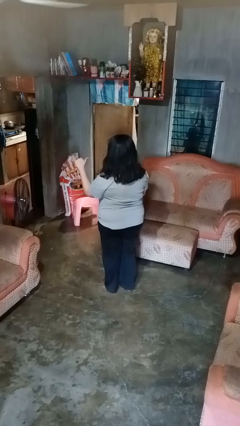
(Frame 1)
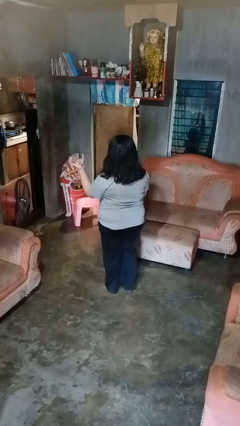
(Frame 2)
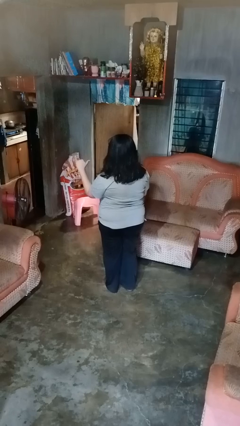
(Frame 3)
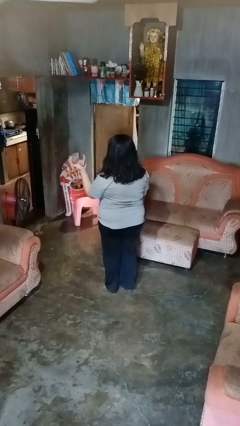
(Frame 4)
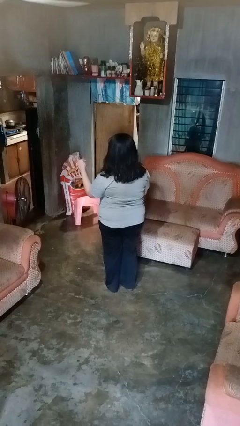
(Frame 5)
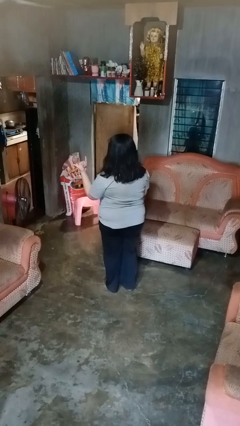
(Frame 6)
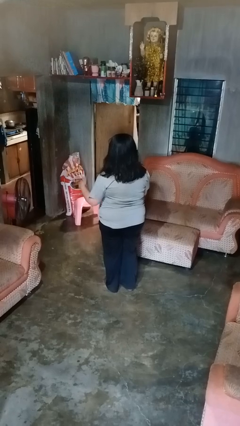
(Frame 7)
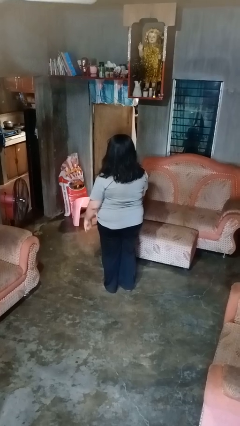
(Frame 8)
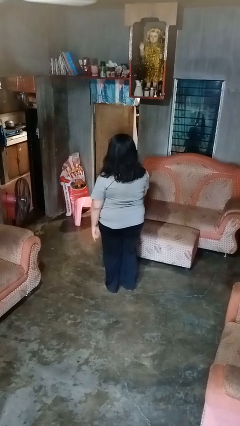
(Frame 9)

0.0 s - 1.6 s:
person gestures hang loose

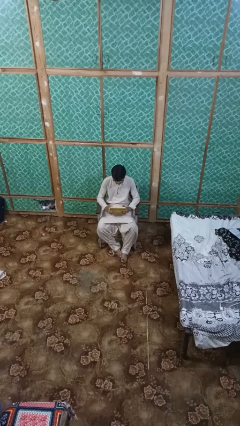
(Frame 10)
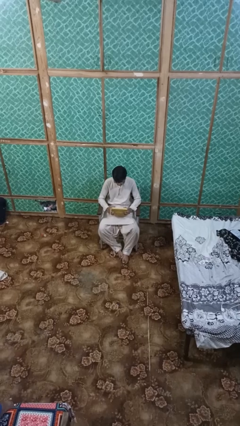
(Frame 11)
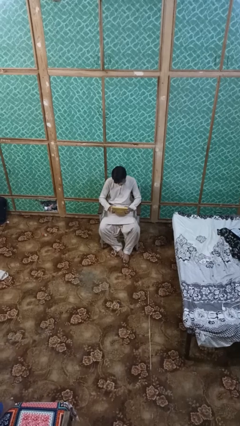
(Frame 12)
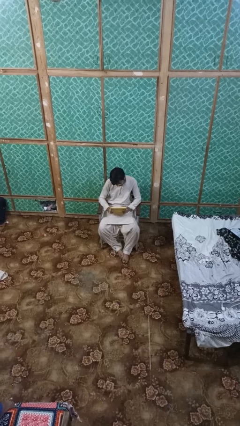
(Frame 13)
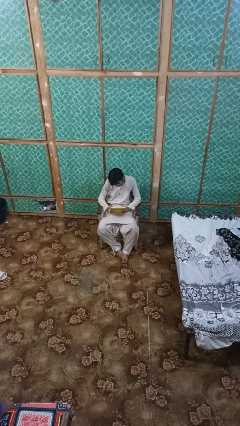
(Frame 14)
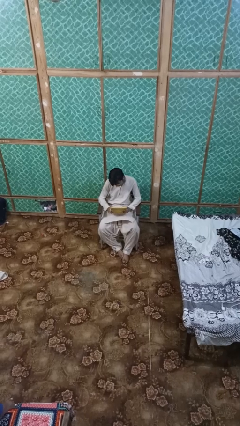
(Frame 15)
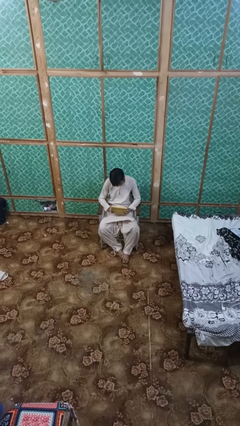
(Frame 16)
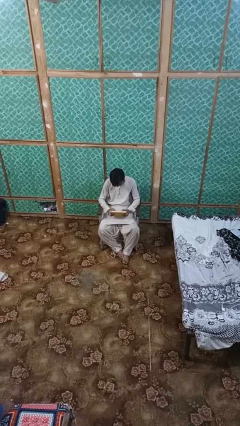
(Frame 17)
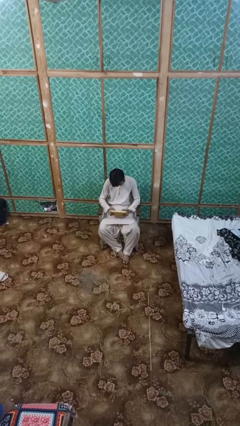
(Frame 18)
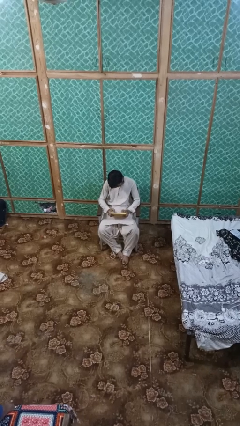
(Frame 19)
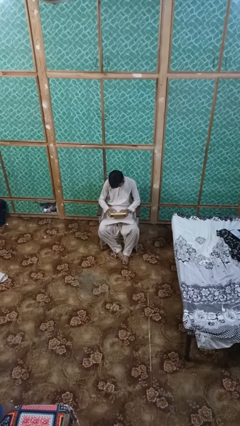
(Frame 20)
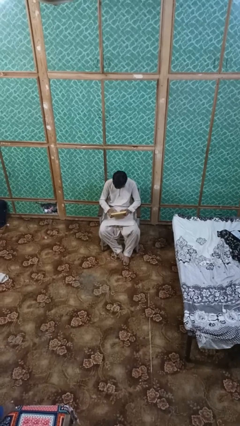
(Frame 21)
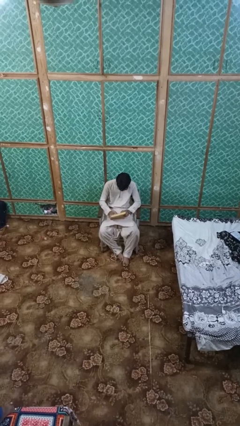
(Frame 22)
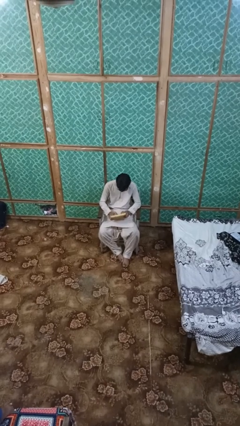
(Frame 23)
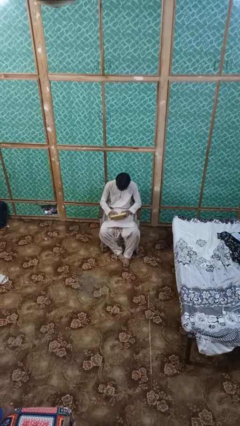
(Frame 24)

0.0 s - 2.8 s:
person interacts with handheld game

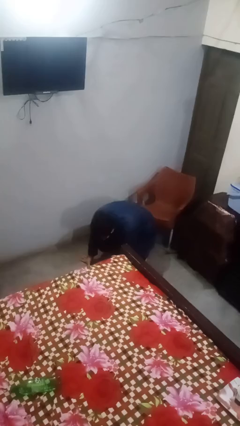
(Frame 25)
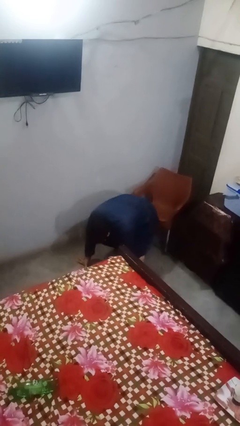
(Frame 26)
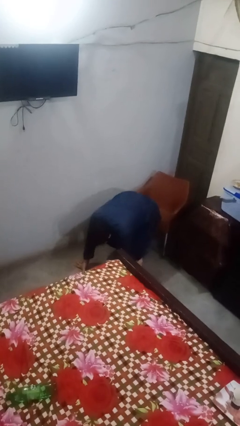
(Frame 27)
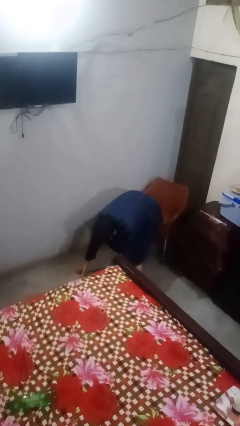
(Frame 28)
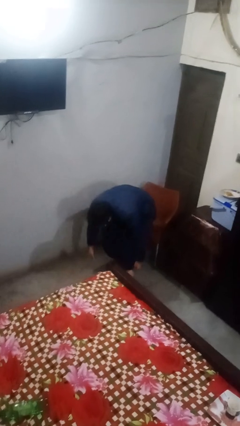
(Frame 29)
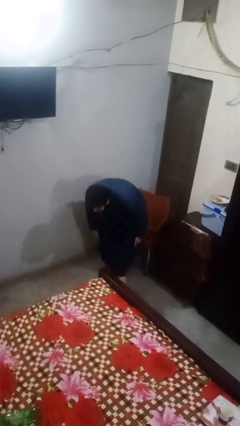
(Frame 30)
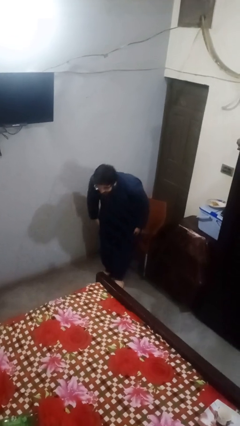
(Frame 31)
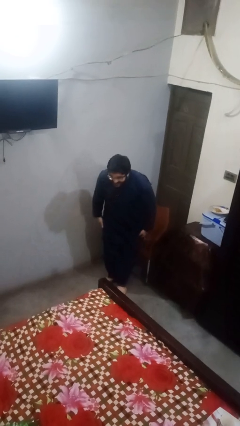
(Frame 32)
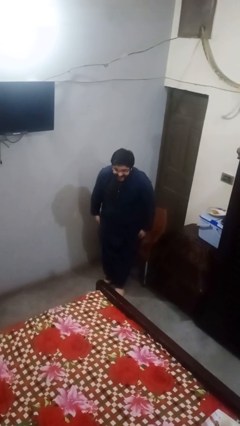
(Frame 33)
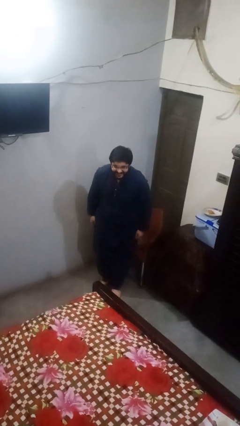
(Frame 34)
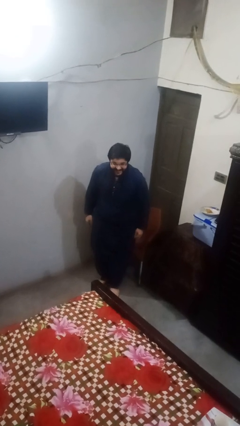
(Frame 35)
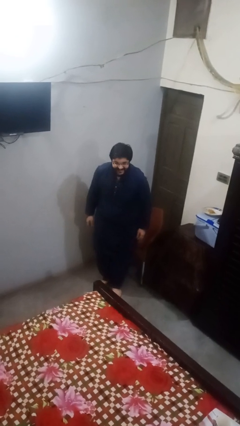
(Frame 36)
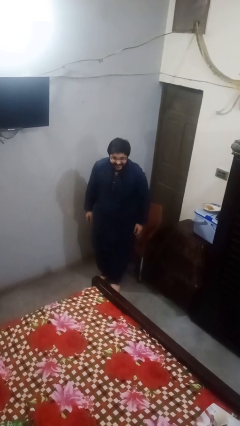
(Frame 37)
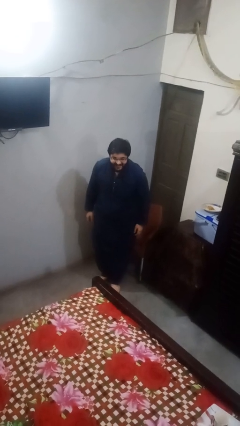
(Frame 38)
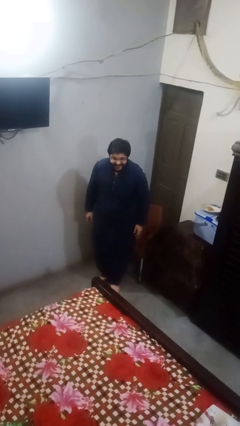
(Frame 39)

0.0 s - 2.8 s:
person stands up from floor

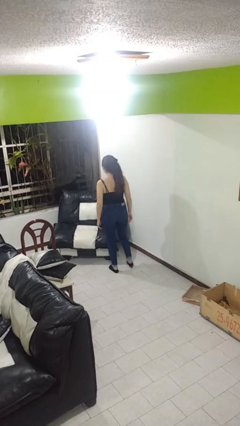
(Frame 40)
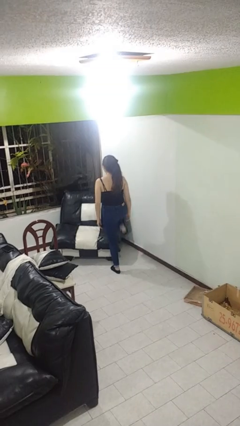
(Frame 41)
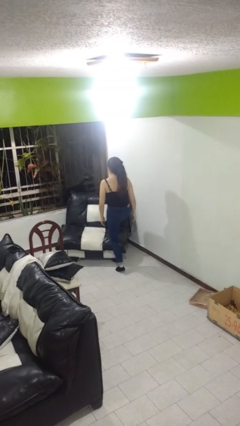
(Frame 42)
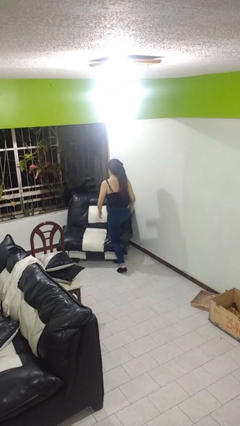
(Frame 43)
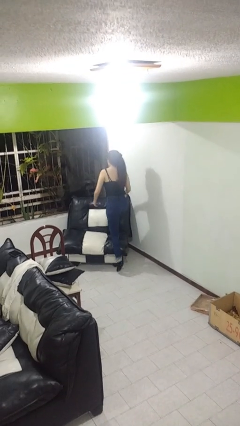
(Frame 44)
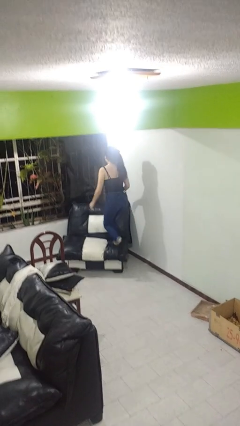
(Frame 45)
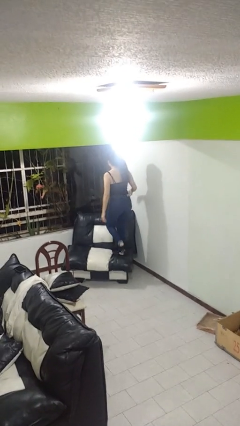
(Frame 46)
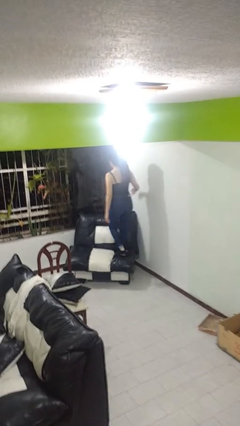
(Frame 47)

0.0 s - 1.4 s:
person climbs on couch

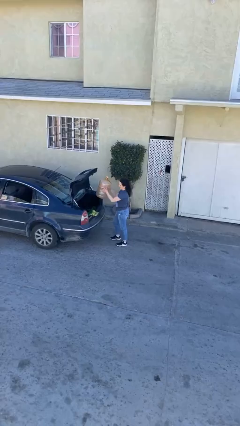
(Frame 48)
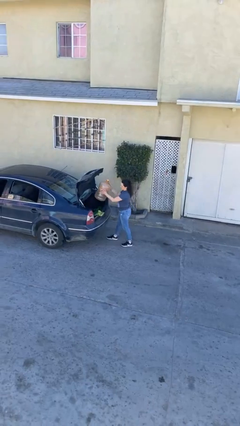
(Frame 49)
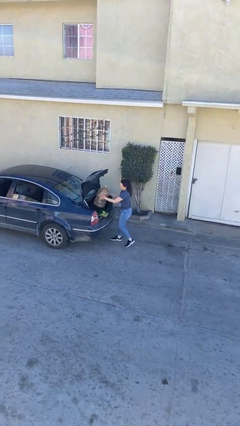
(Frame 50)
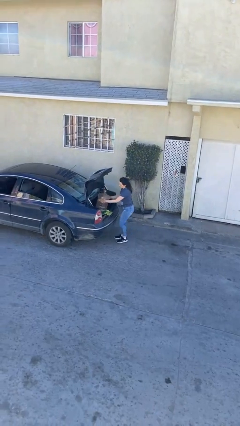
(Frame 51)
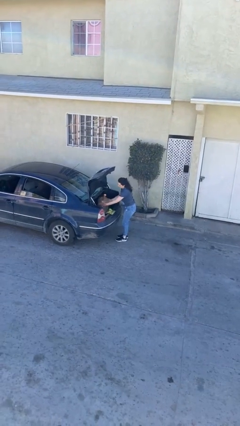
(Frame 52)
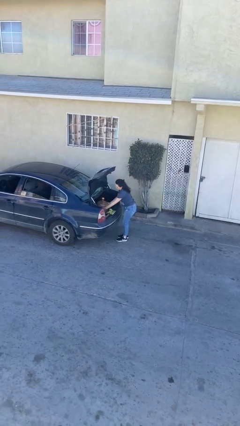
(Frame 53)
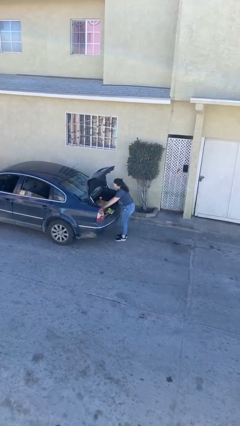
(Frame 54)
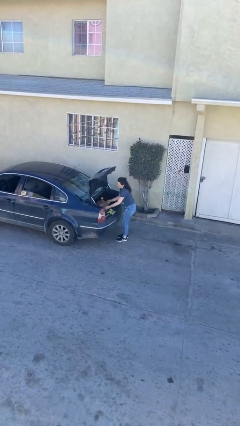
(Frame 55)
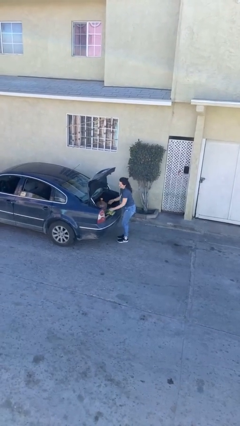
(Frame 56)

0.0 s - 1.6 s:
person loads car

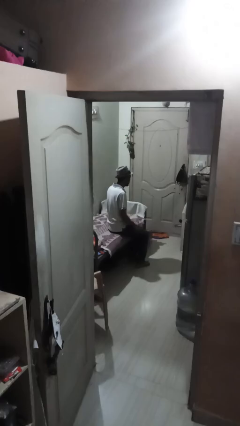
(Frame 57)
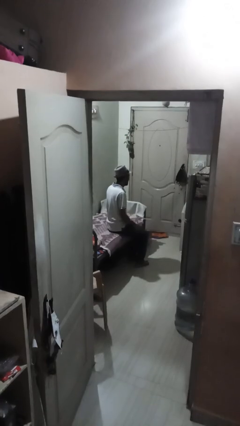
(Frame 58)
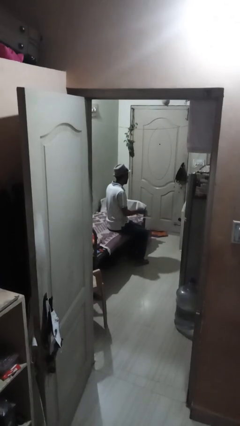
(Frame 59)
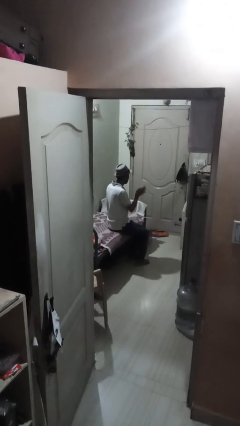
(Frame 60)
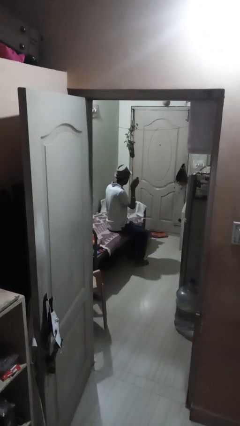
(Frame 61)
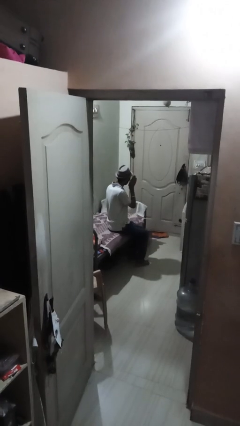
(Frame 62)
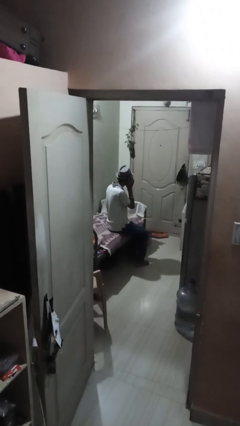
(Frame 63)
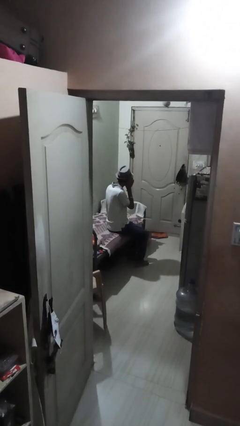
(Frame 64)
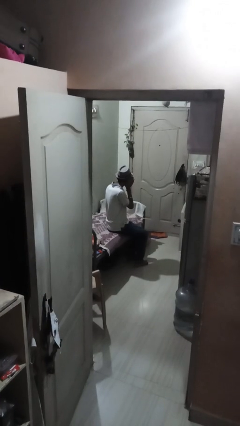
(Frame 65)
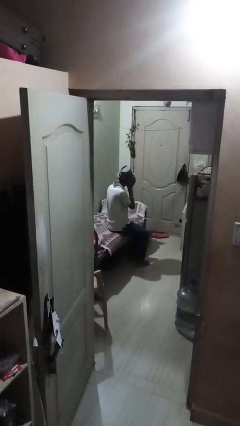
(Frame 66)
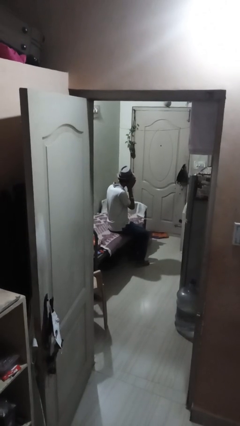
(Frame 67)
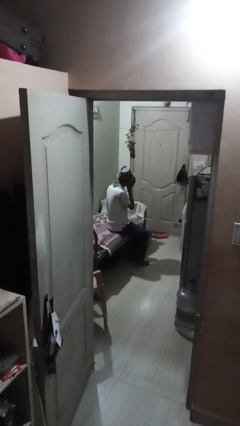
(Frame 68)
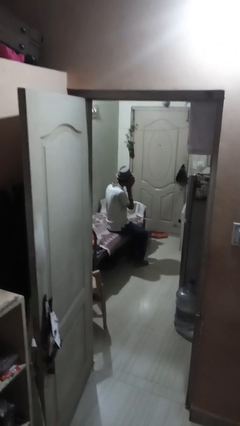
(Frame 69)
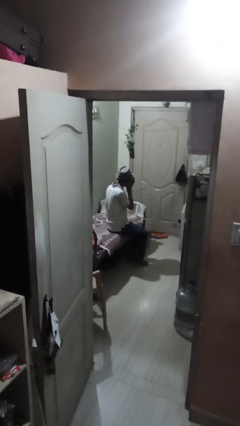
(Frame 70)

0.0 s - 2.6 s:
person gestures listen closely

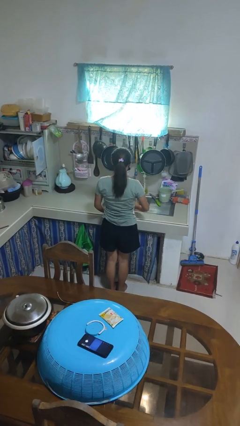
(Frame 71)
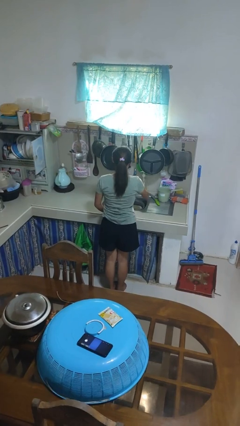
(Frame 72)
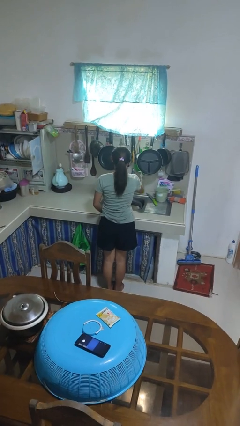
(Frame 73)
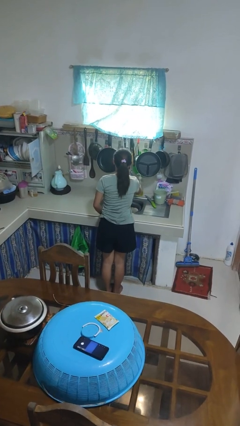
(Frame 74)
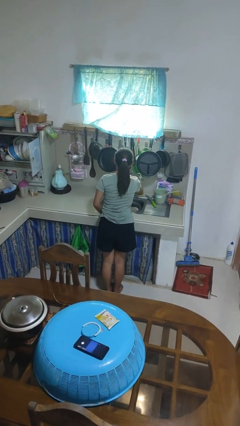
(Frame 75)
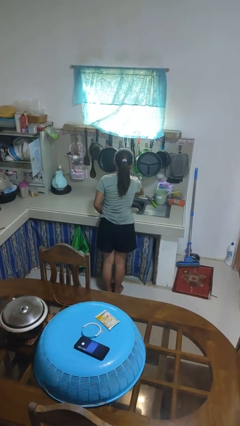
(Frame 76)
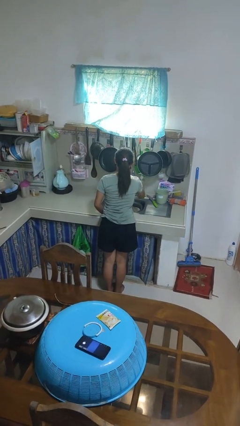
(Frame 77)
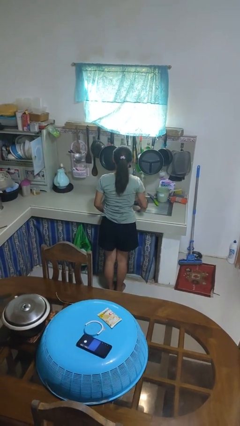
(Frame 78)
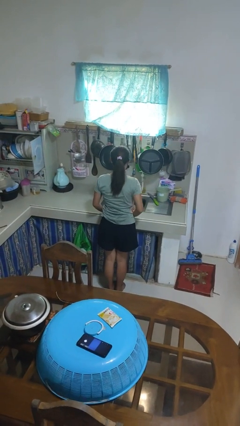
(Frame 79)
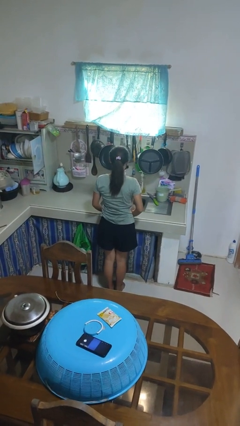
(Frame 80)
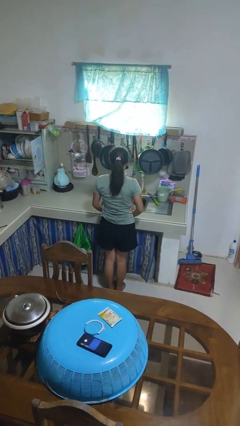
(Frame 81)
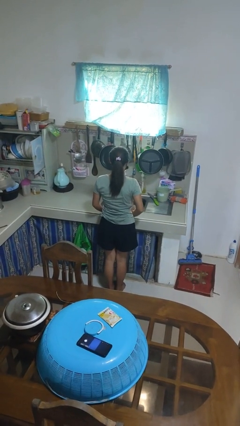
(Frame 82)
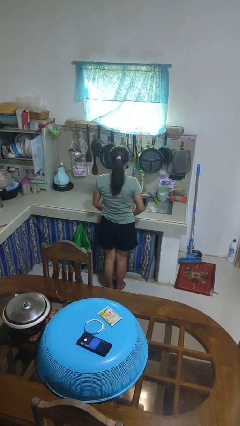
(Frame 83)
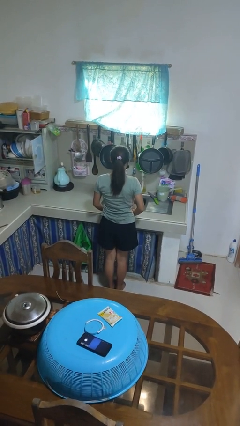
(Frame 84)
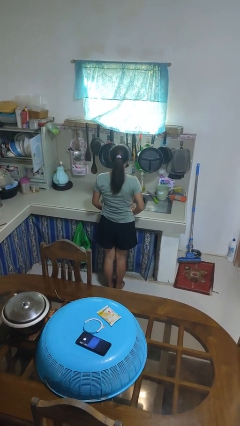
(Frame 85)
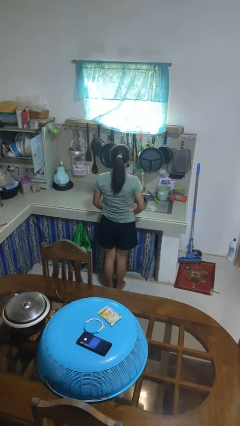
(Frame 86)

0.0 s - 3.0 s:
person turns on faucet

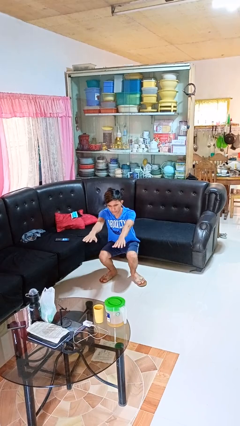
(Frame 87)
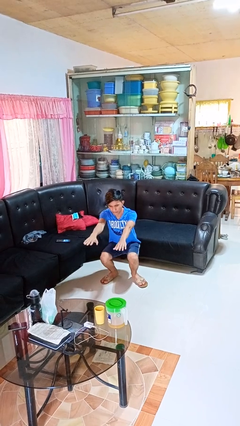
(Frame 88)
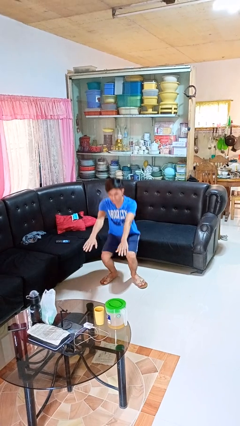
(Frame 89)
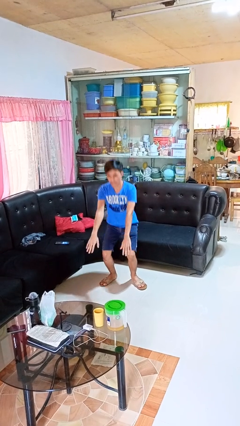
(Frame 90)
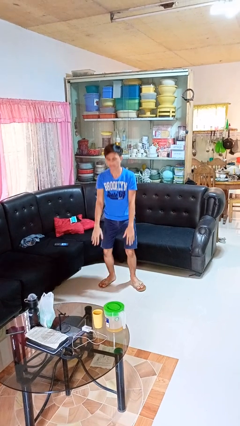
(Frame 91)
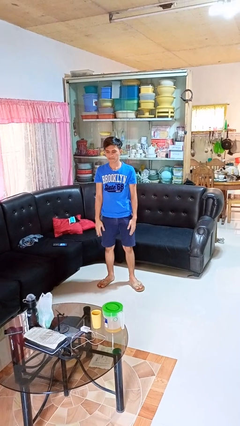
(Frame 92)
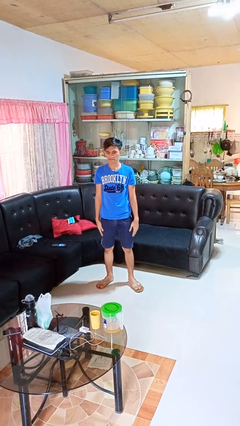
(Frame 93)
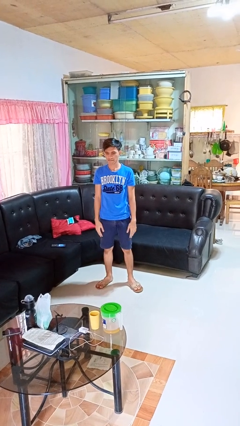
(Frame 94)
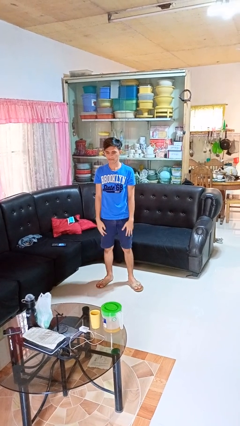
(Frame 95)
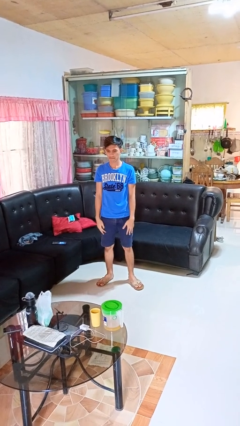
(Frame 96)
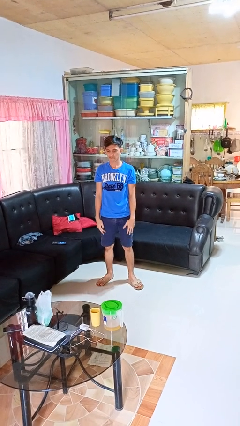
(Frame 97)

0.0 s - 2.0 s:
person stands up
